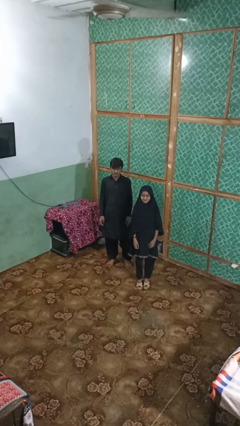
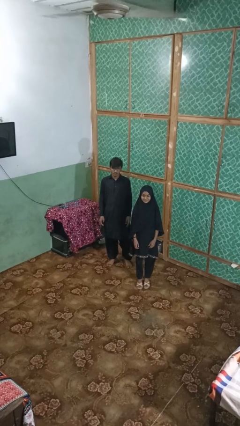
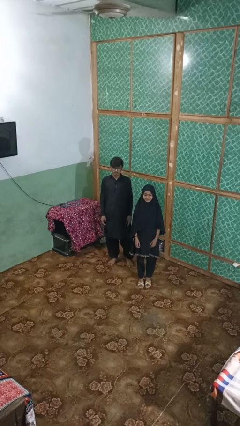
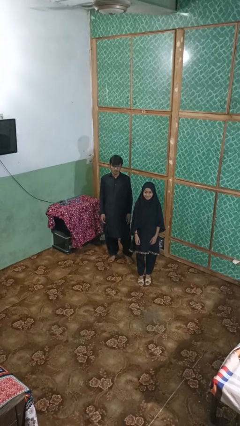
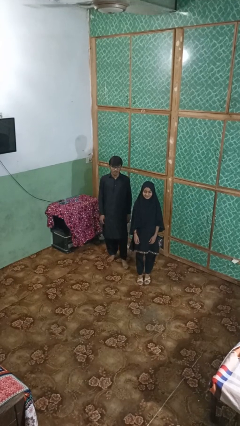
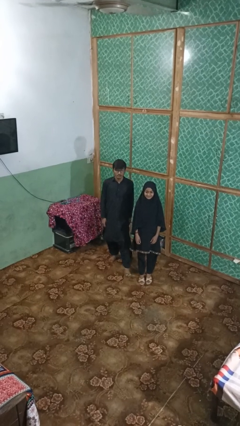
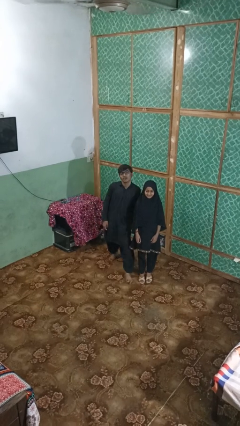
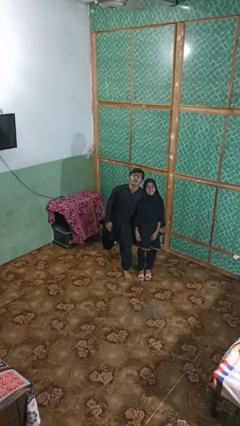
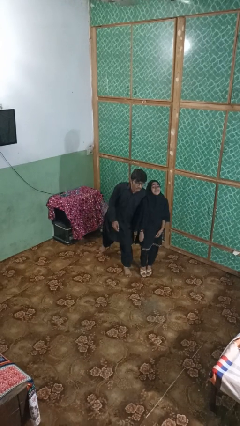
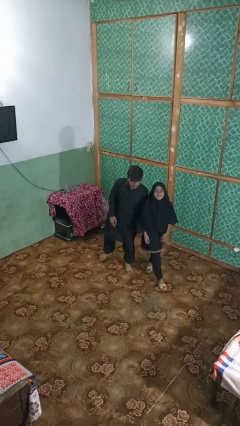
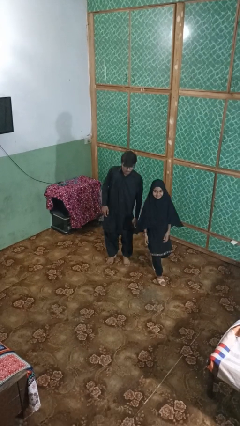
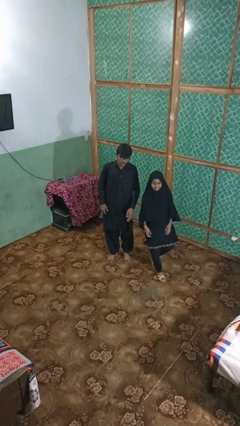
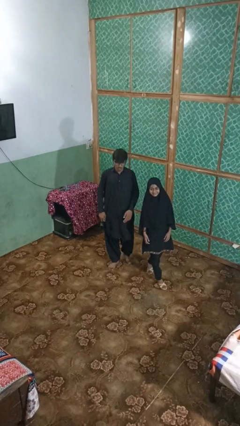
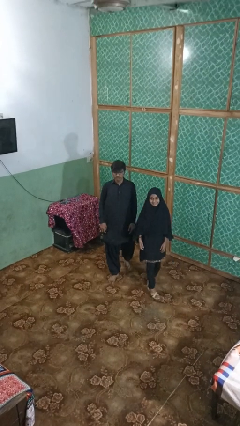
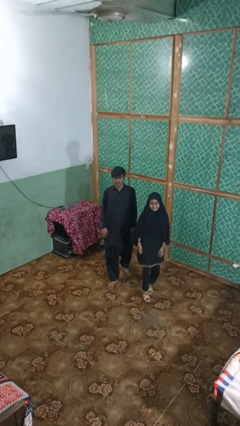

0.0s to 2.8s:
person shoves person

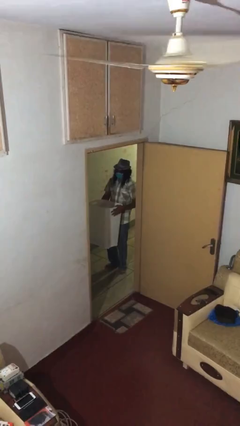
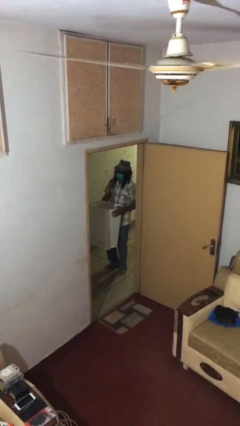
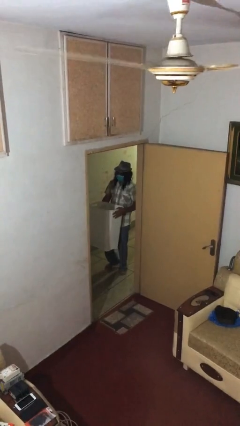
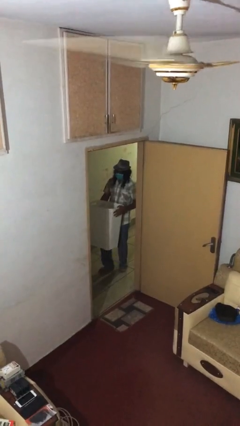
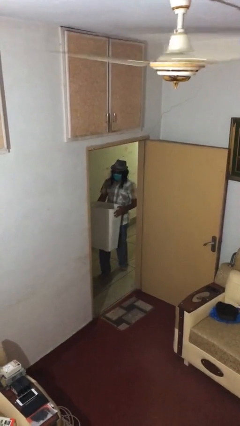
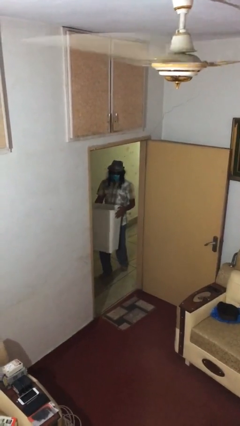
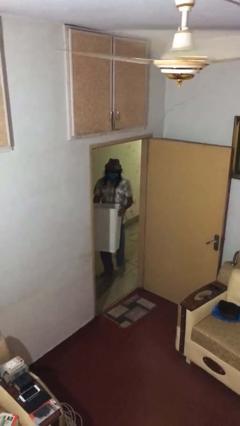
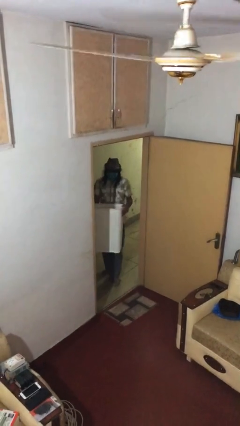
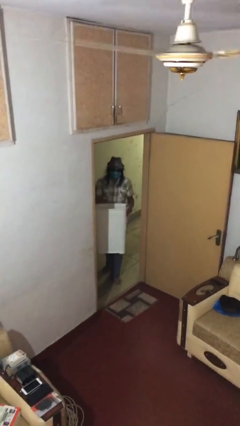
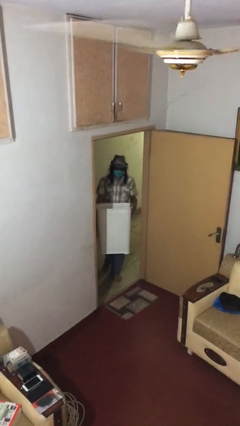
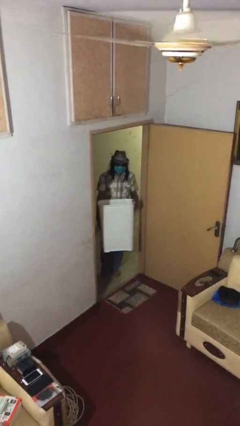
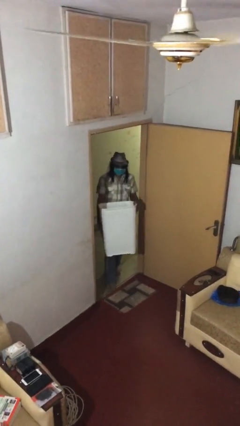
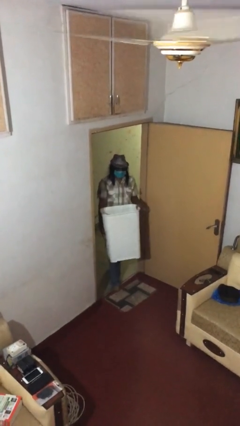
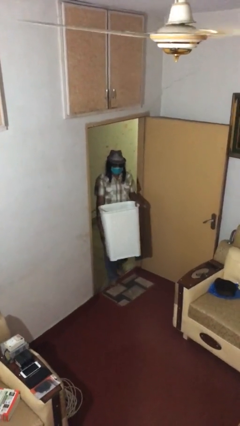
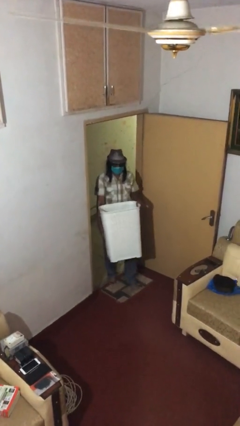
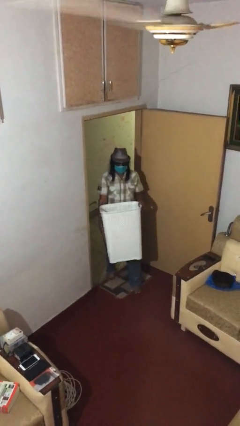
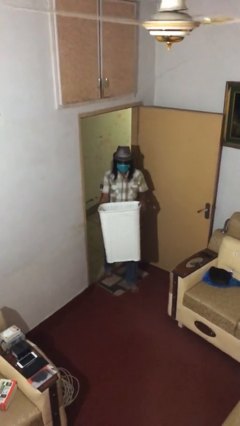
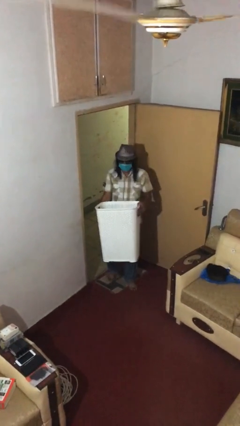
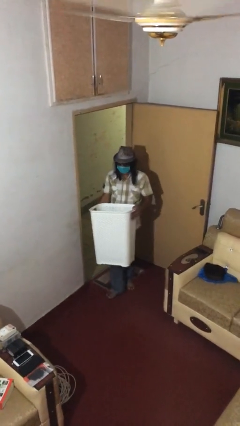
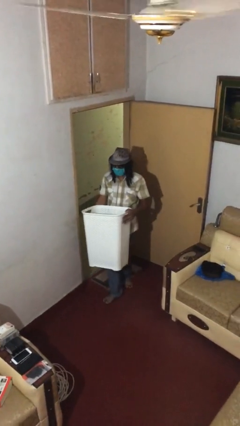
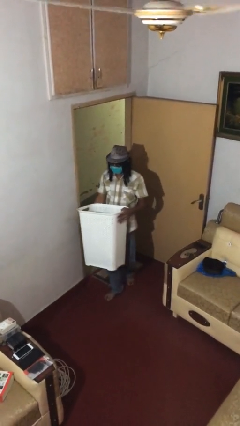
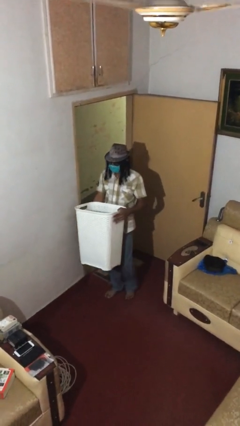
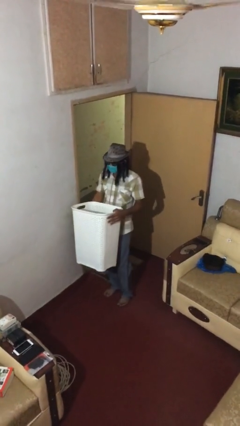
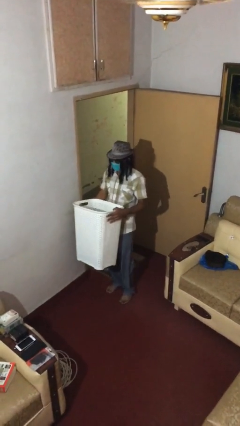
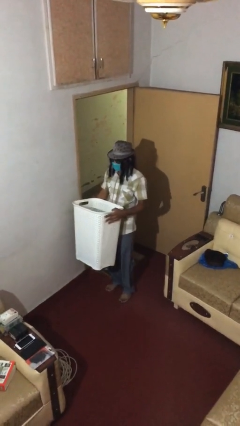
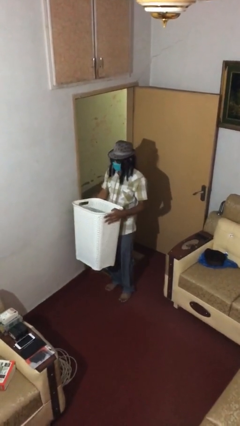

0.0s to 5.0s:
person carries heavy object

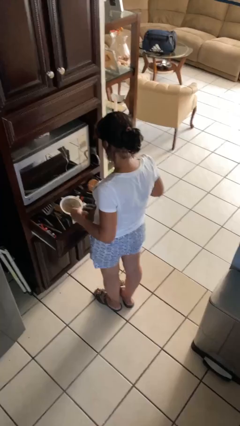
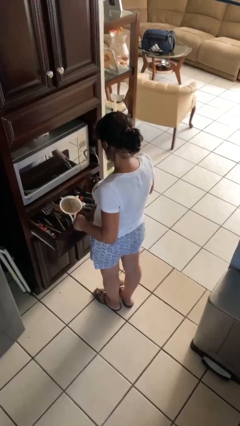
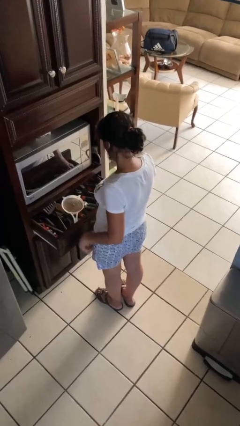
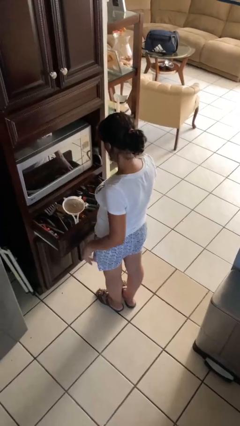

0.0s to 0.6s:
person puts object into kitchen drawer

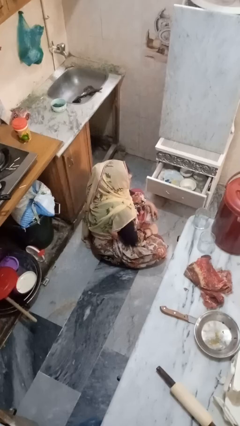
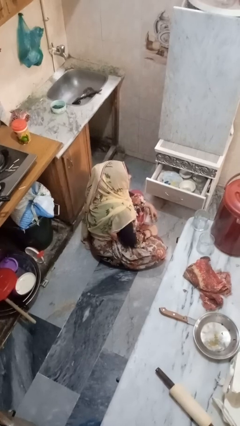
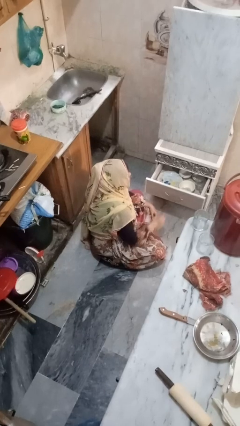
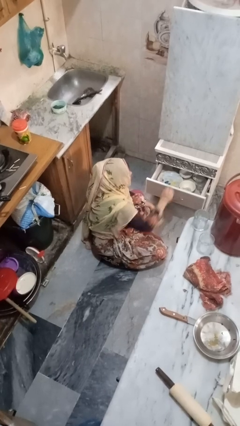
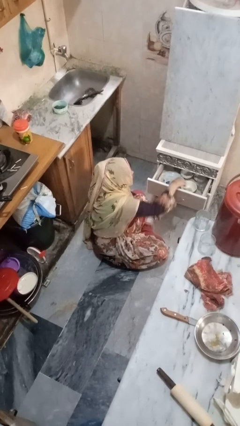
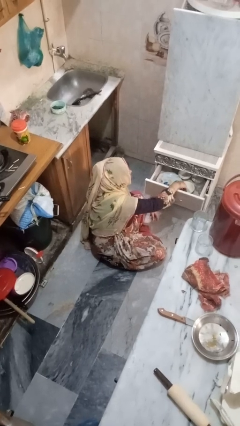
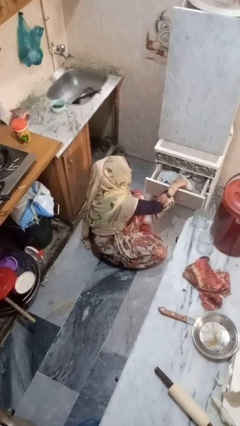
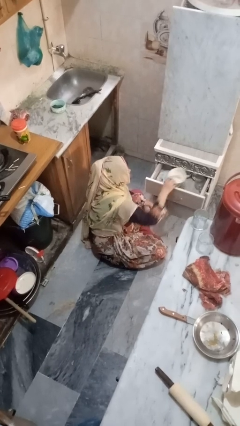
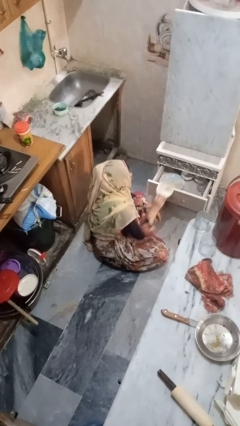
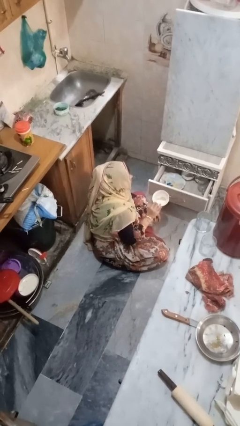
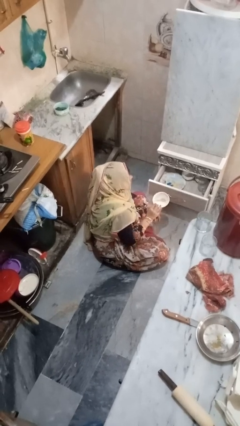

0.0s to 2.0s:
person takes object from kitchen drawer

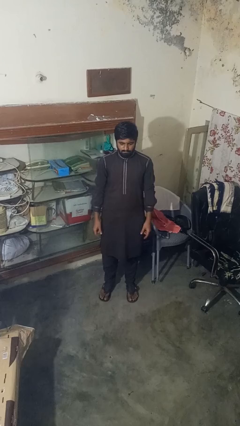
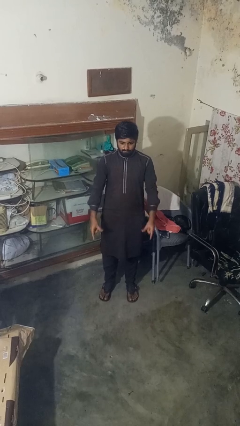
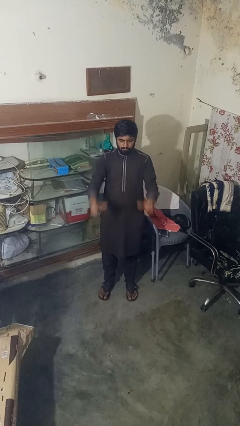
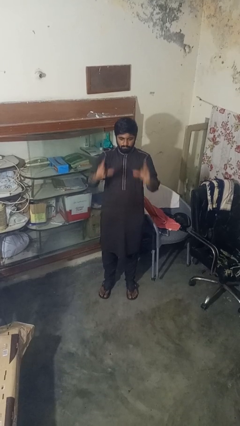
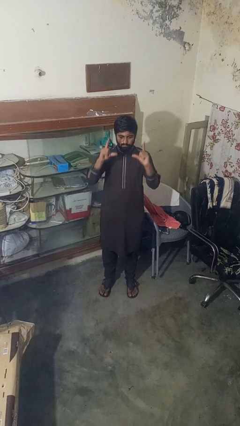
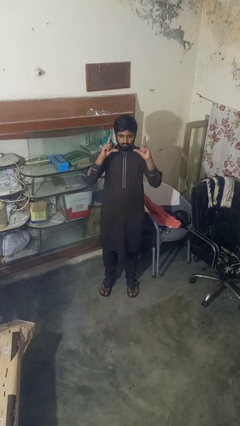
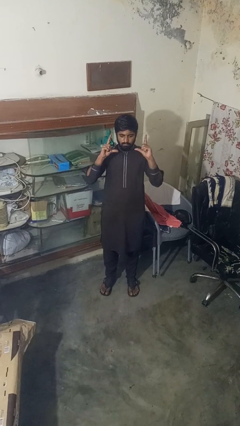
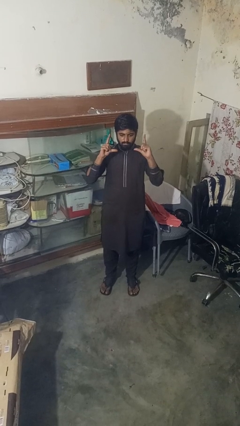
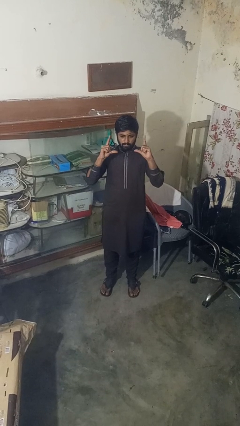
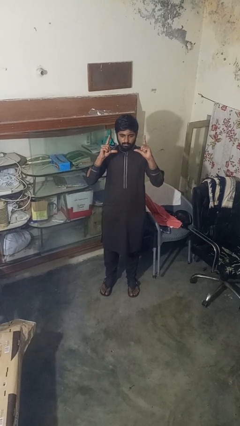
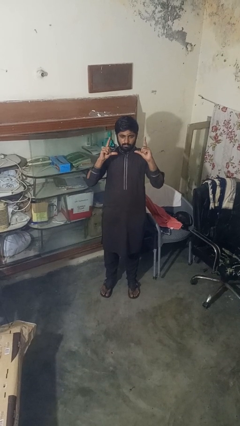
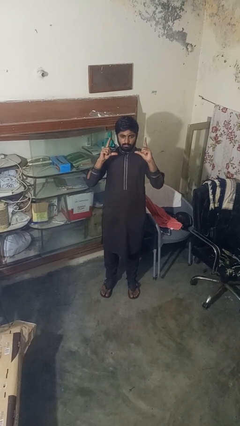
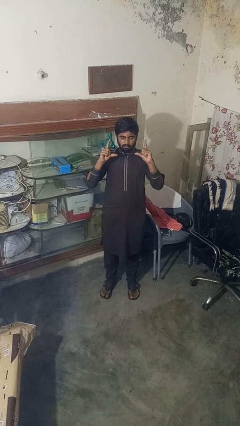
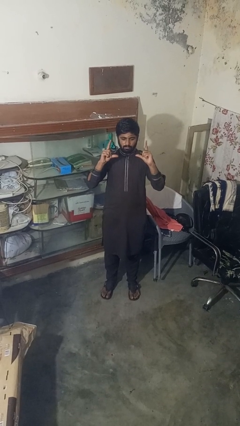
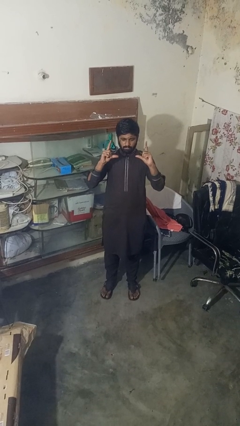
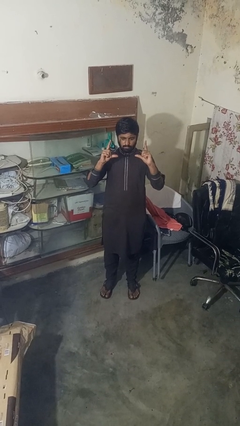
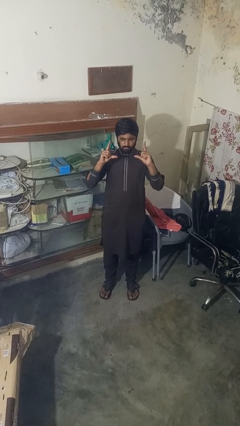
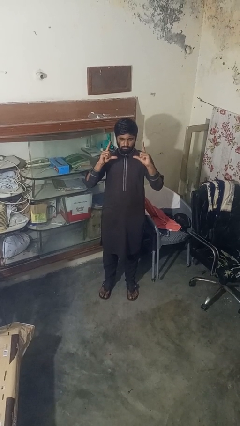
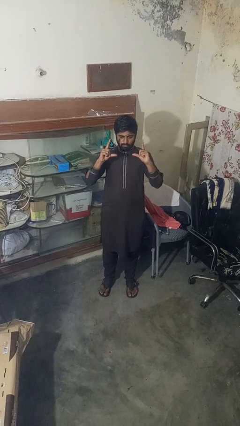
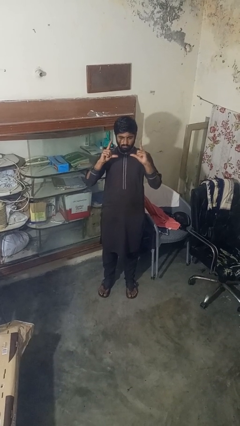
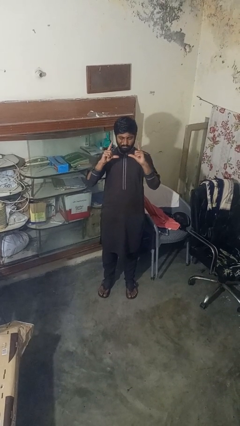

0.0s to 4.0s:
person gestures zoom in

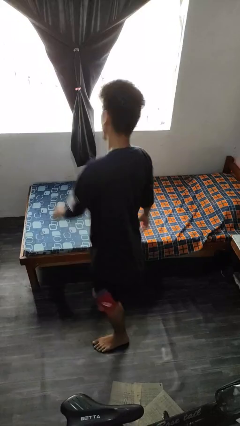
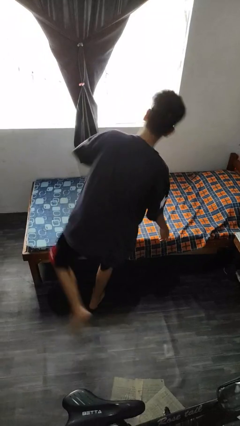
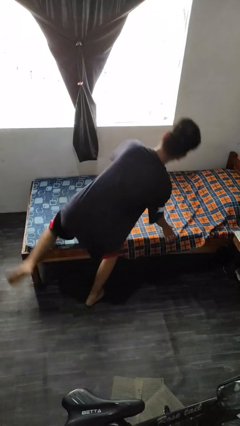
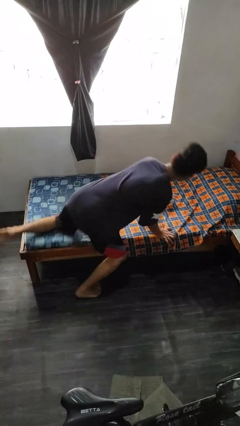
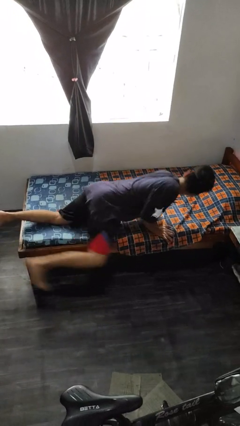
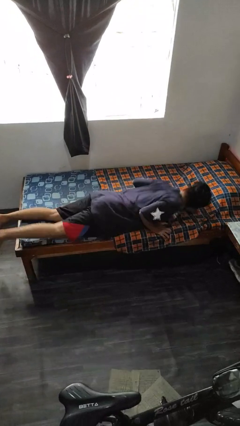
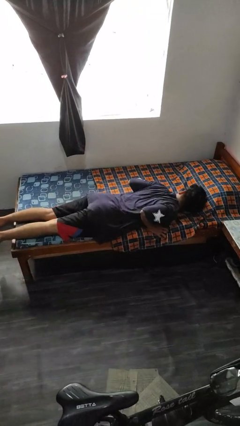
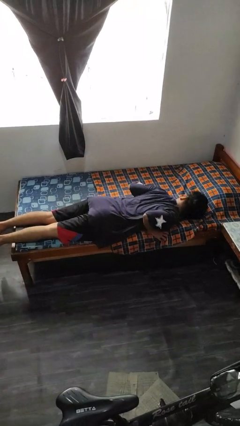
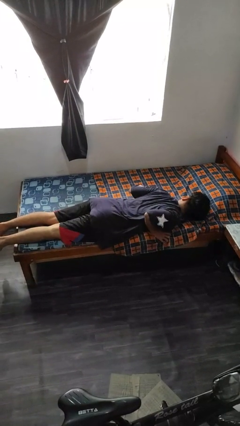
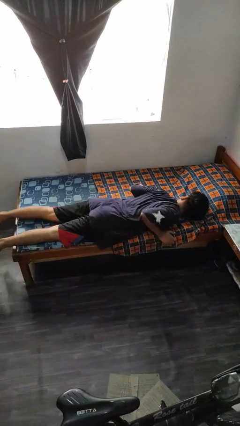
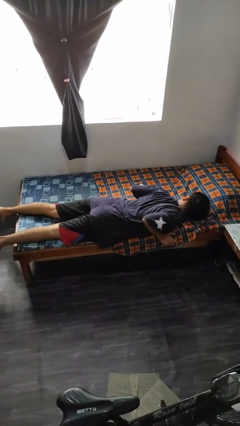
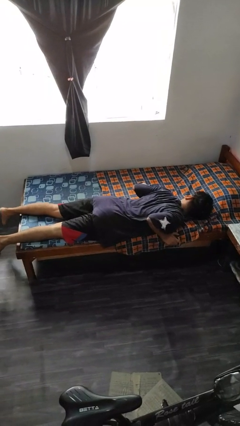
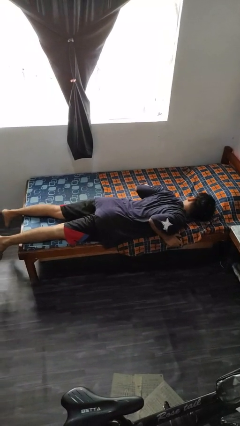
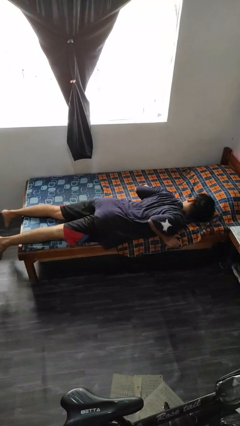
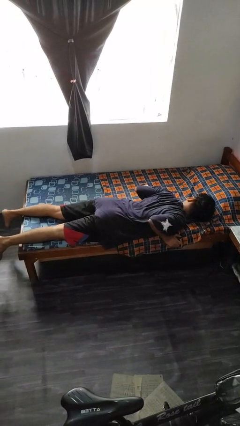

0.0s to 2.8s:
person lies down on bed

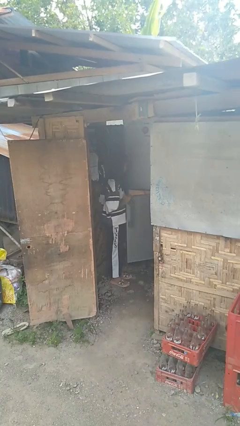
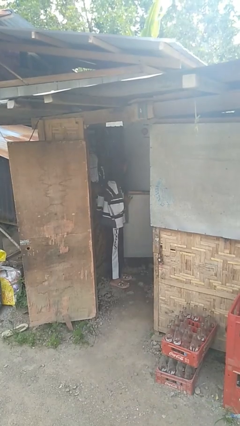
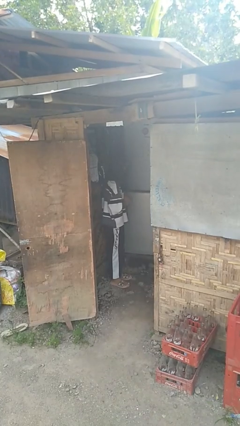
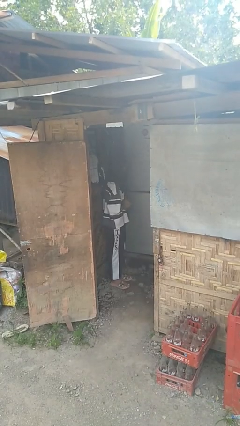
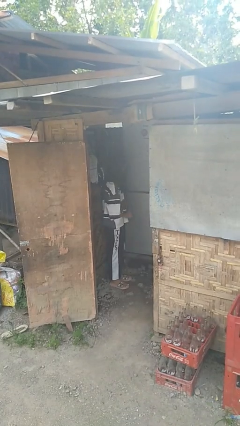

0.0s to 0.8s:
person closes refrigerator
